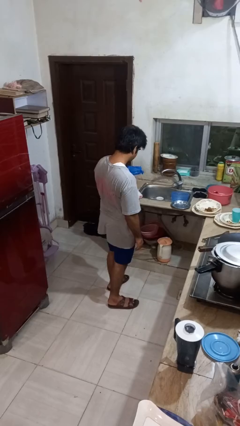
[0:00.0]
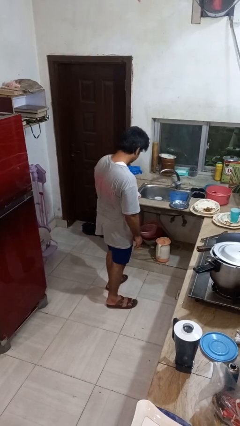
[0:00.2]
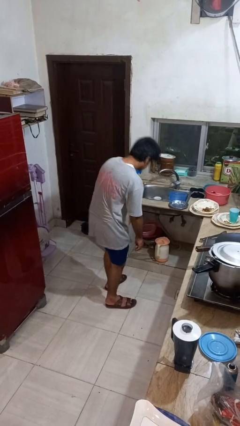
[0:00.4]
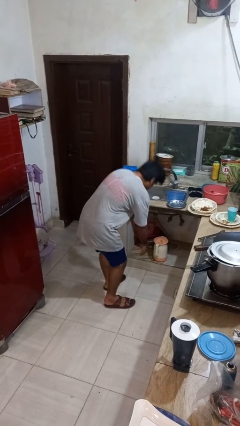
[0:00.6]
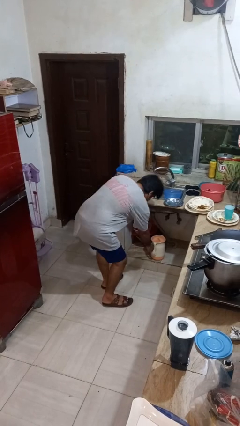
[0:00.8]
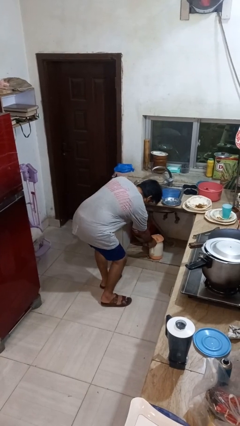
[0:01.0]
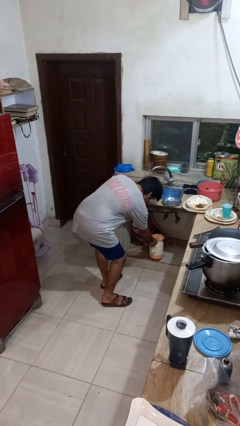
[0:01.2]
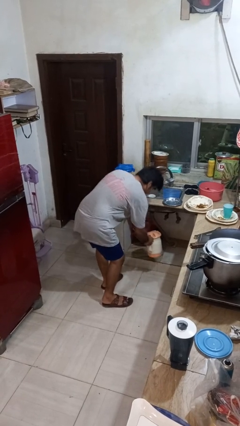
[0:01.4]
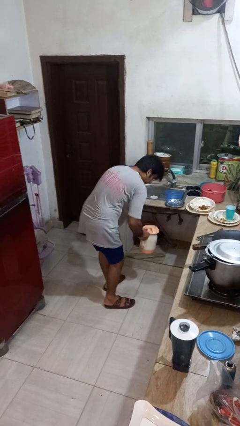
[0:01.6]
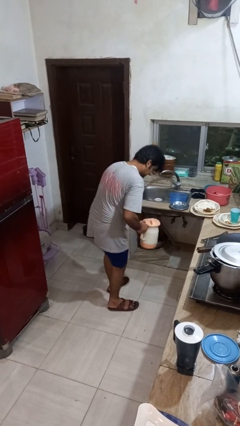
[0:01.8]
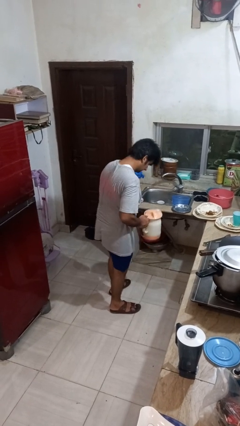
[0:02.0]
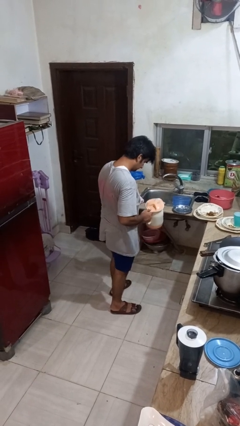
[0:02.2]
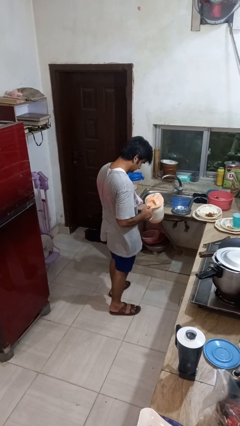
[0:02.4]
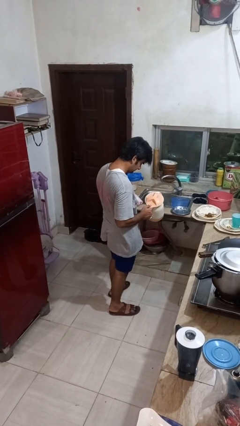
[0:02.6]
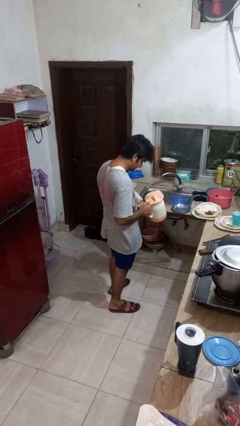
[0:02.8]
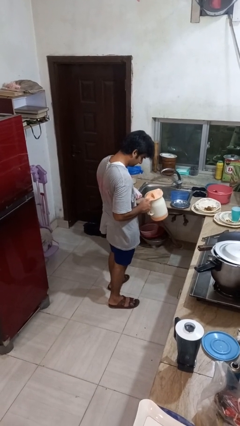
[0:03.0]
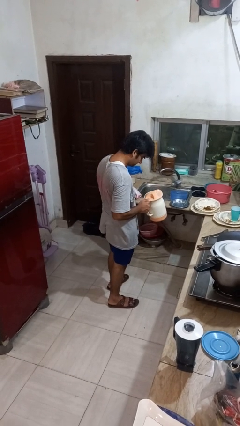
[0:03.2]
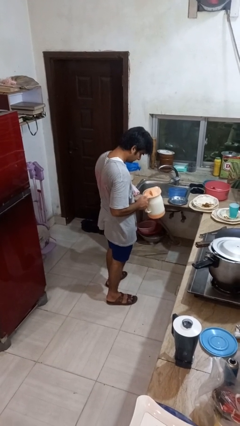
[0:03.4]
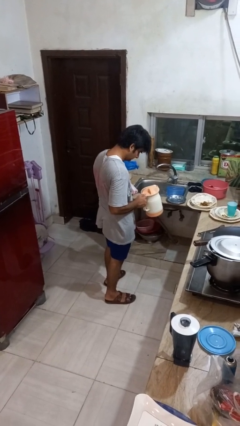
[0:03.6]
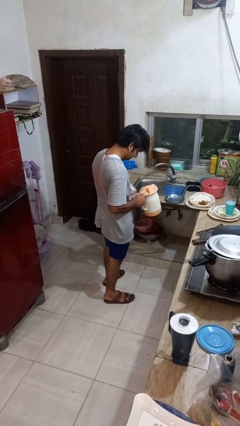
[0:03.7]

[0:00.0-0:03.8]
person picks up object from cabinet

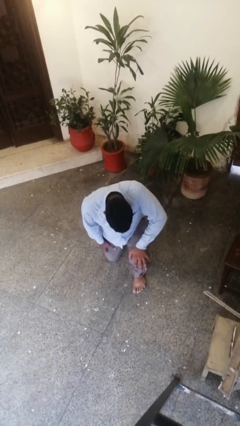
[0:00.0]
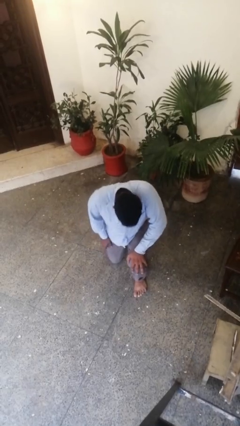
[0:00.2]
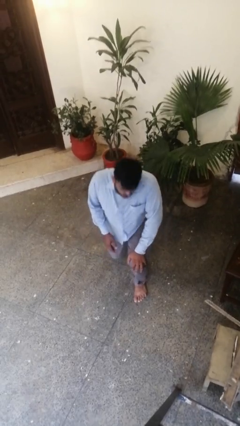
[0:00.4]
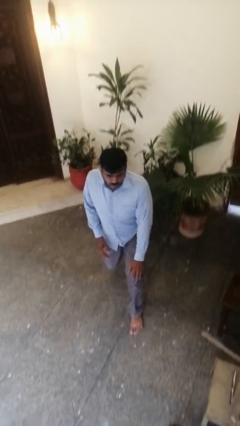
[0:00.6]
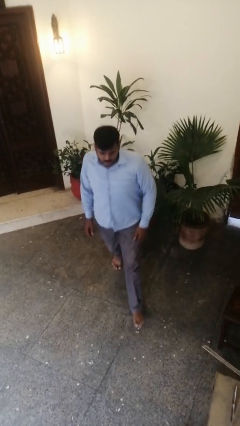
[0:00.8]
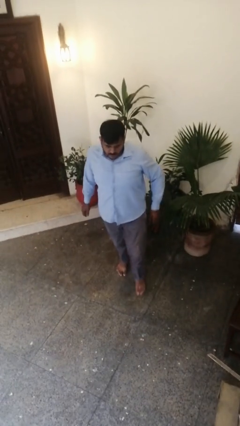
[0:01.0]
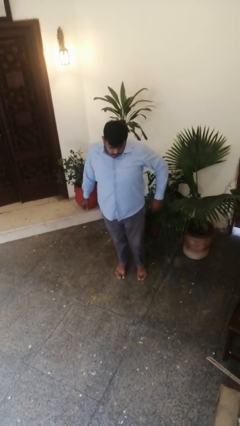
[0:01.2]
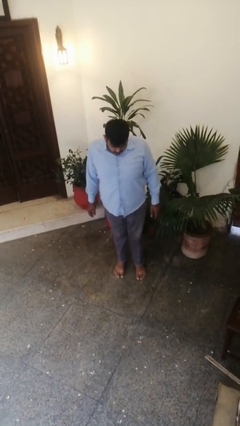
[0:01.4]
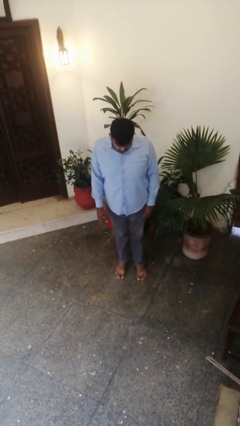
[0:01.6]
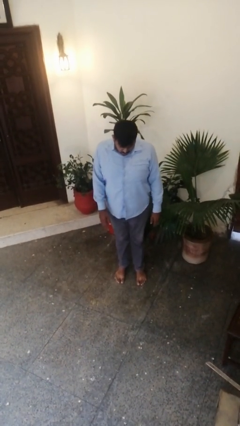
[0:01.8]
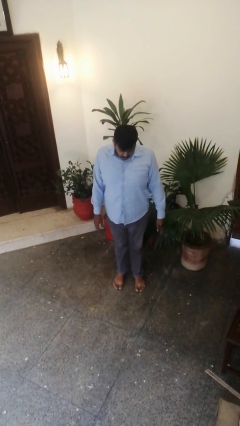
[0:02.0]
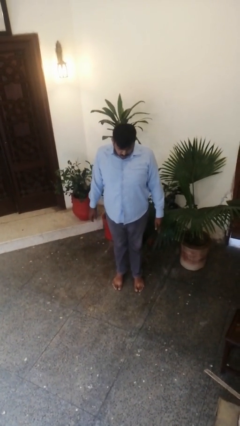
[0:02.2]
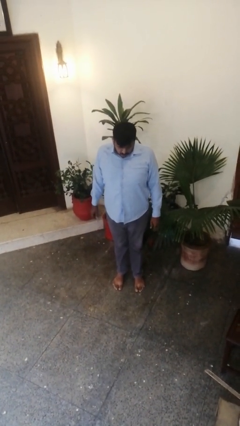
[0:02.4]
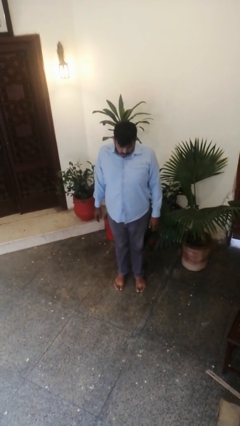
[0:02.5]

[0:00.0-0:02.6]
person stands up from floor

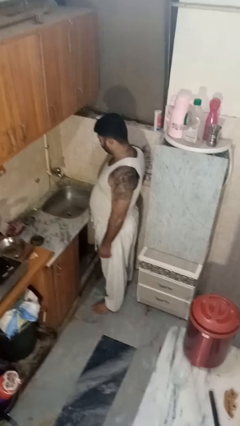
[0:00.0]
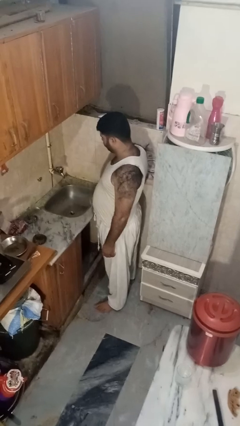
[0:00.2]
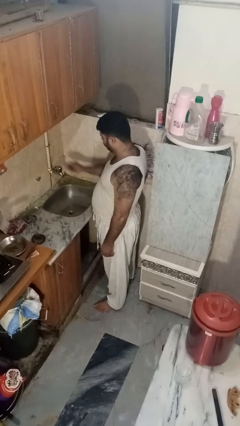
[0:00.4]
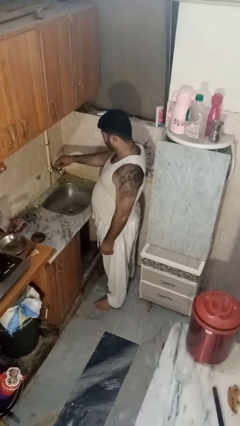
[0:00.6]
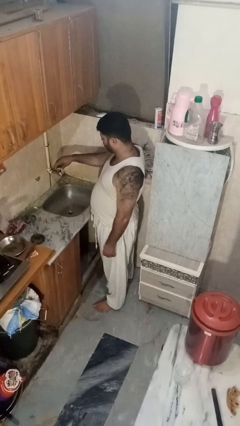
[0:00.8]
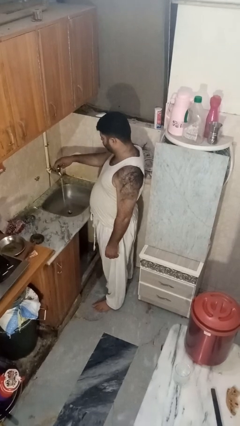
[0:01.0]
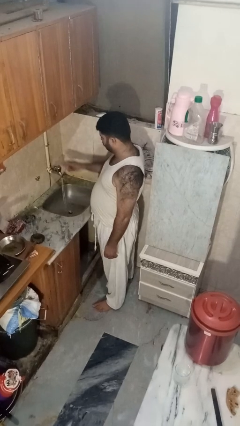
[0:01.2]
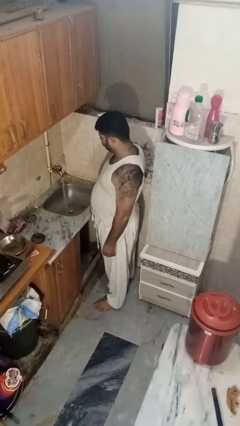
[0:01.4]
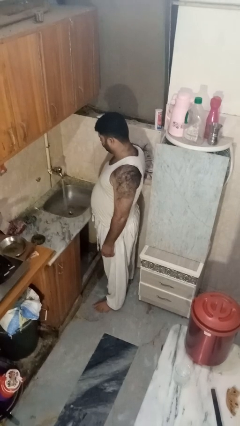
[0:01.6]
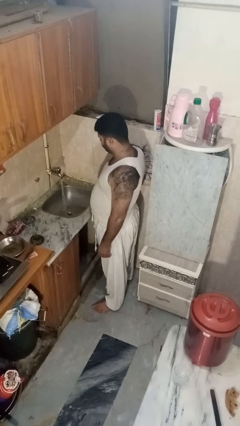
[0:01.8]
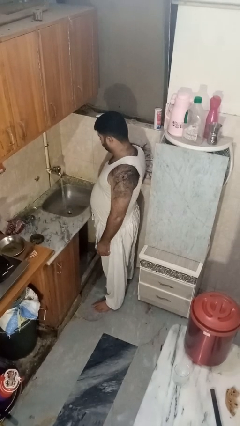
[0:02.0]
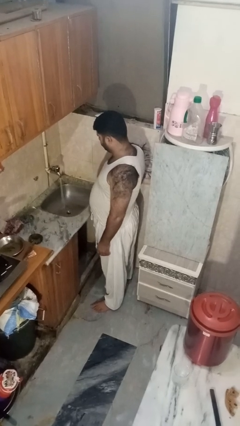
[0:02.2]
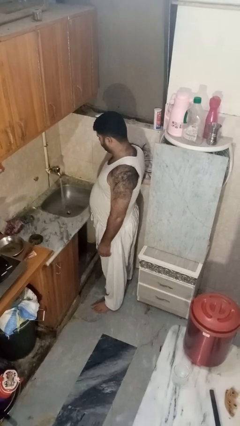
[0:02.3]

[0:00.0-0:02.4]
person turns on faucet

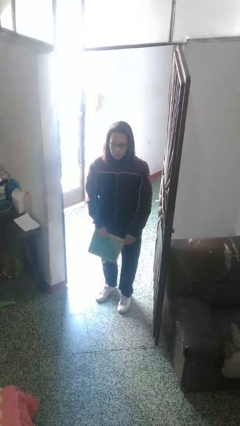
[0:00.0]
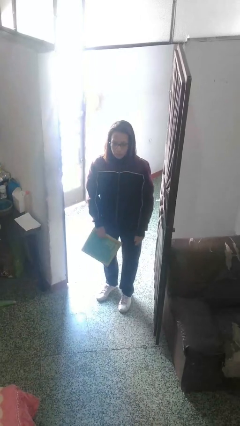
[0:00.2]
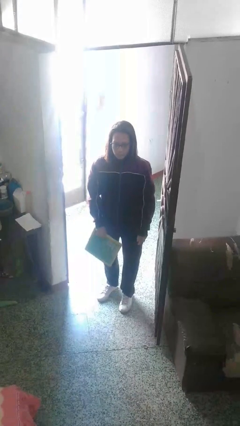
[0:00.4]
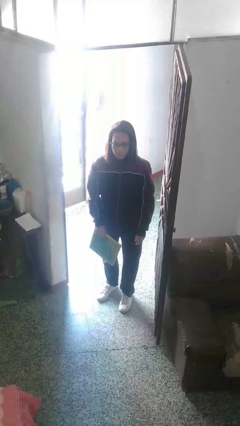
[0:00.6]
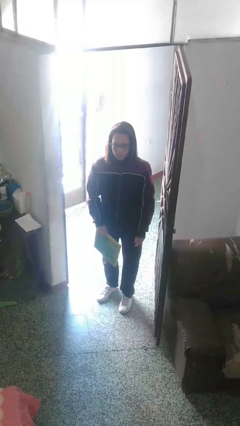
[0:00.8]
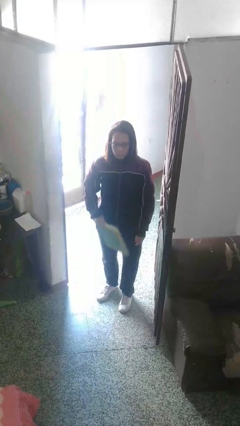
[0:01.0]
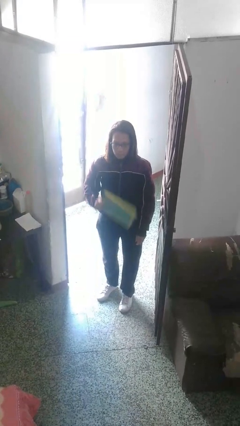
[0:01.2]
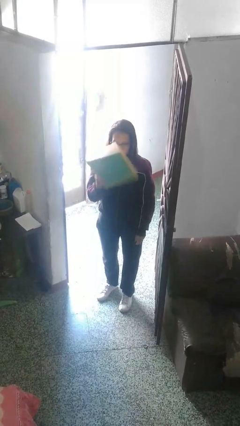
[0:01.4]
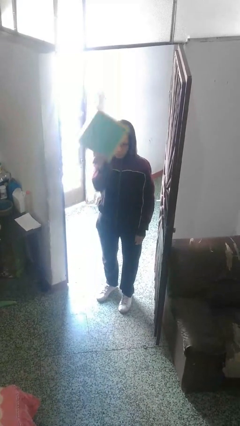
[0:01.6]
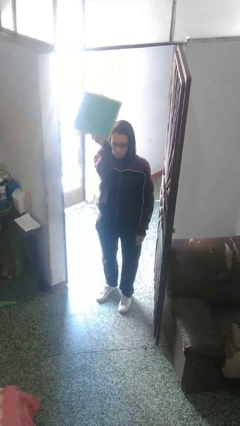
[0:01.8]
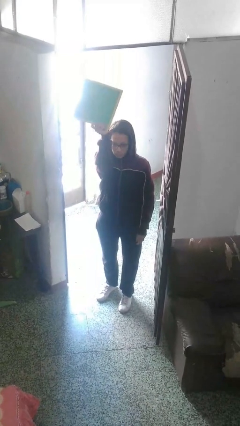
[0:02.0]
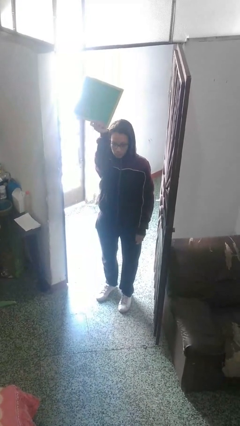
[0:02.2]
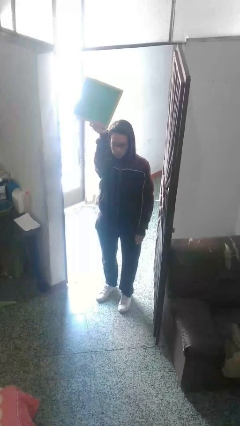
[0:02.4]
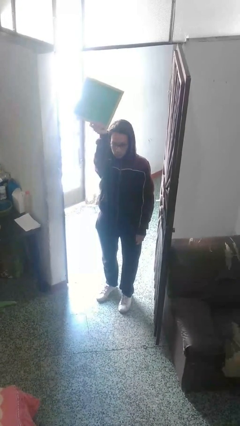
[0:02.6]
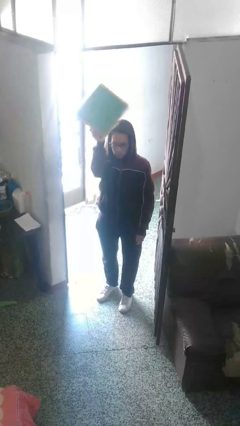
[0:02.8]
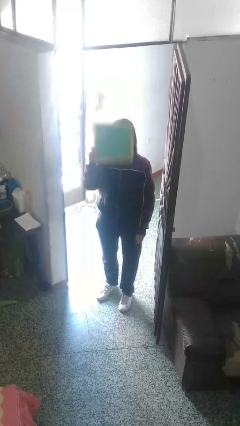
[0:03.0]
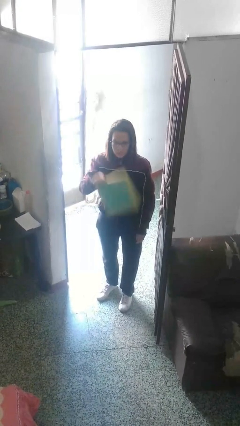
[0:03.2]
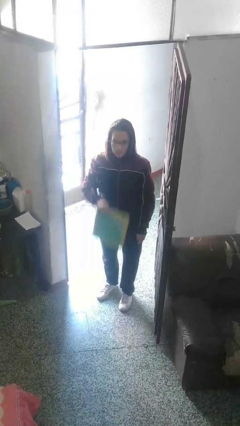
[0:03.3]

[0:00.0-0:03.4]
person holds object above head

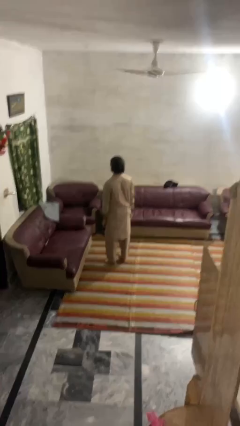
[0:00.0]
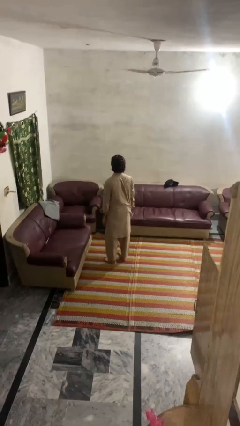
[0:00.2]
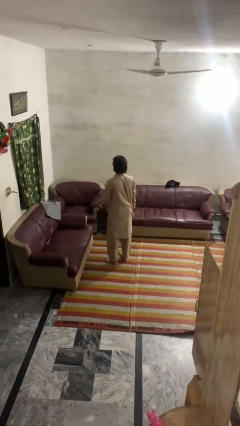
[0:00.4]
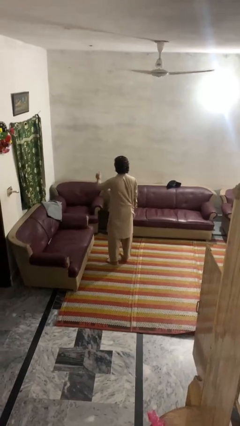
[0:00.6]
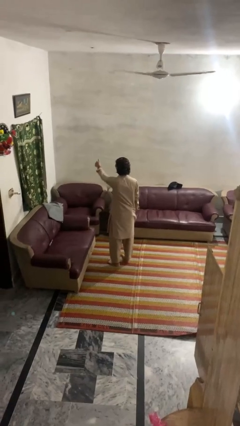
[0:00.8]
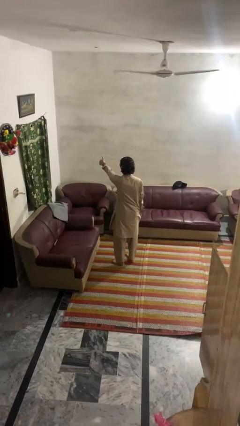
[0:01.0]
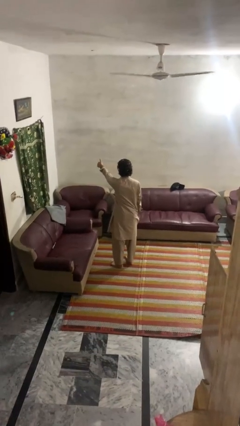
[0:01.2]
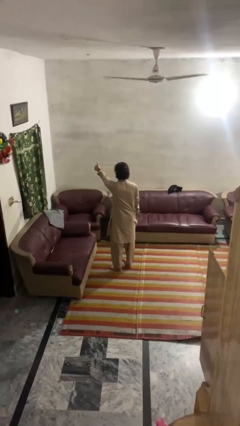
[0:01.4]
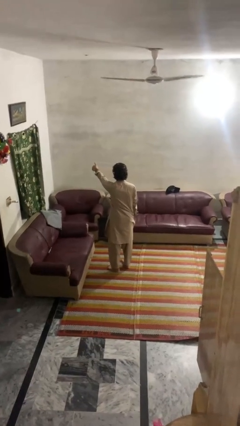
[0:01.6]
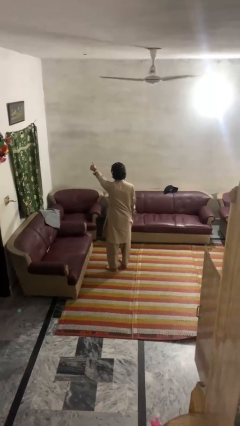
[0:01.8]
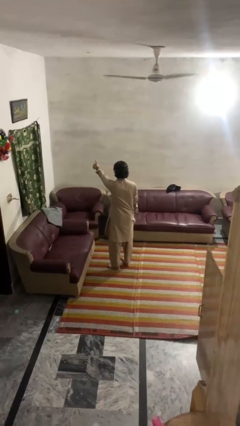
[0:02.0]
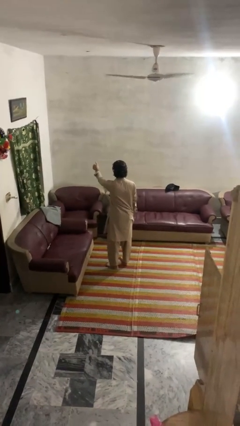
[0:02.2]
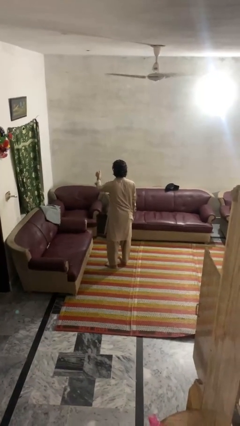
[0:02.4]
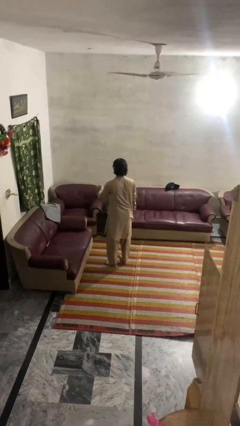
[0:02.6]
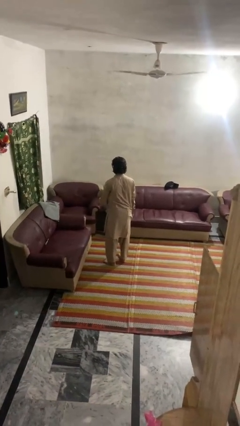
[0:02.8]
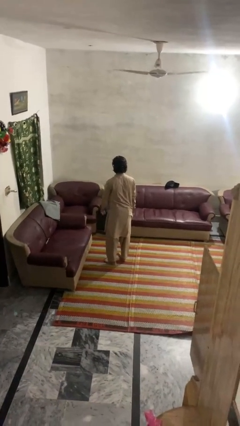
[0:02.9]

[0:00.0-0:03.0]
person gestures thumbs up

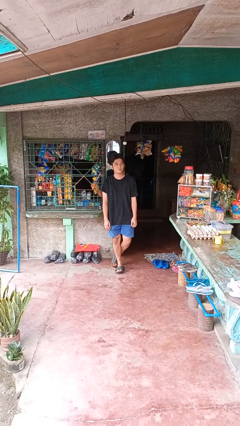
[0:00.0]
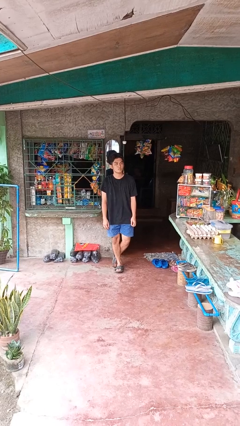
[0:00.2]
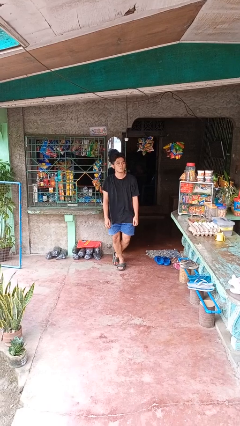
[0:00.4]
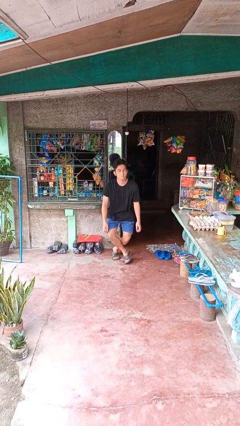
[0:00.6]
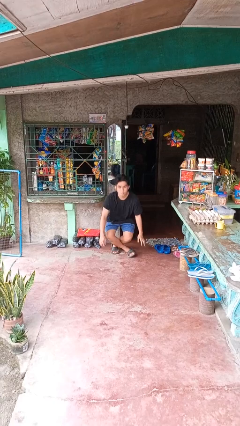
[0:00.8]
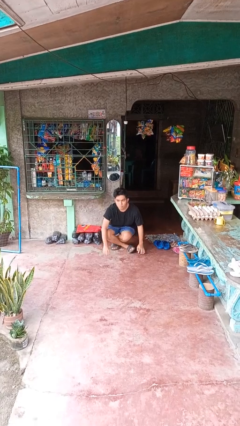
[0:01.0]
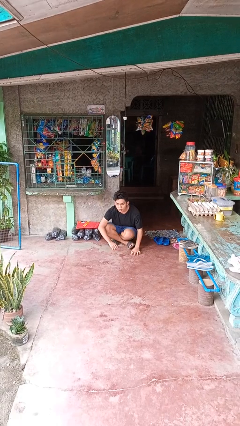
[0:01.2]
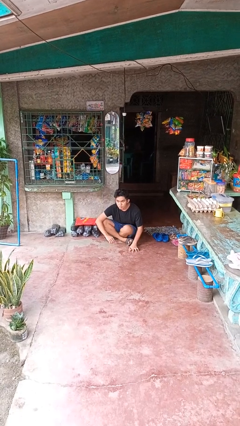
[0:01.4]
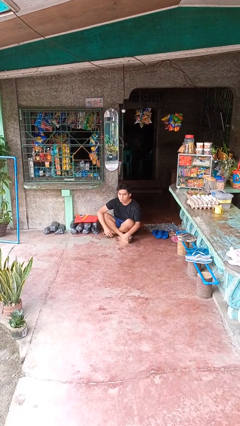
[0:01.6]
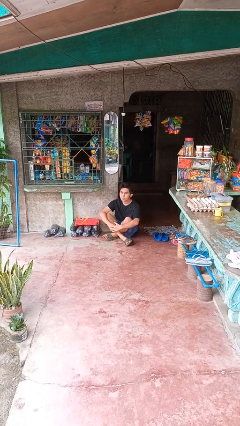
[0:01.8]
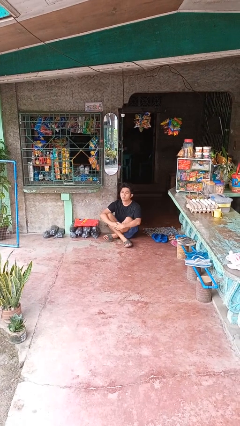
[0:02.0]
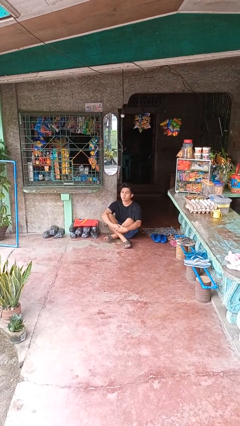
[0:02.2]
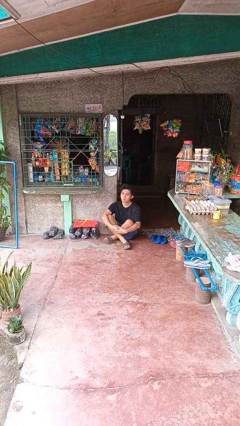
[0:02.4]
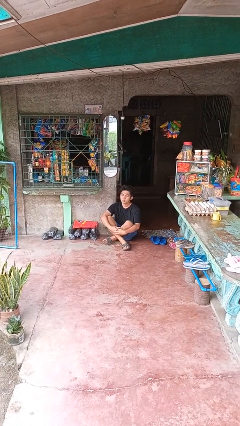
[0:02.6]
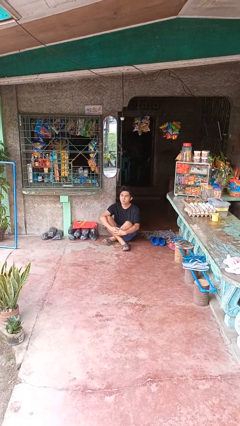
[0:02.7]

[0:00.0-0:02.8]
person sits crisscross
